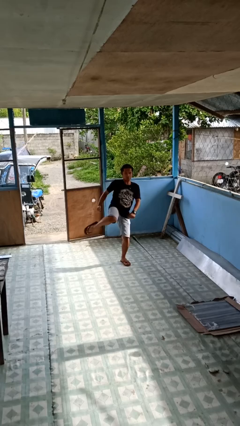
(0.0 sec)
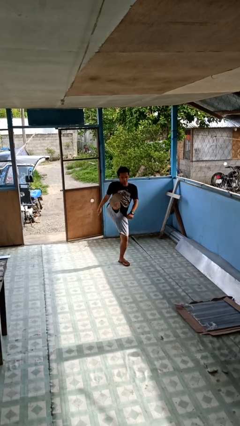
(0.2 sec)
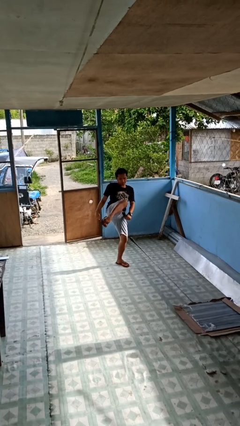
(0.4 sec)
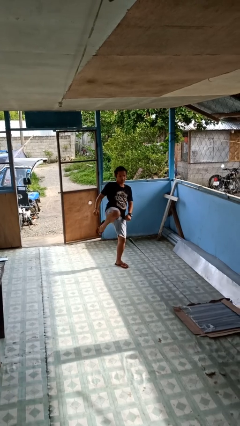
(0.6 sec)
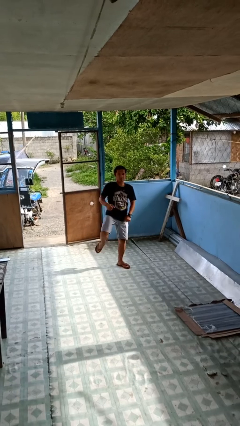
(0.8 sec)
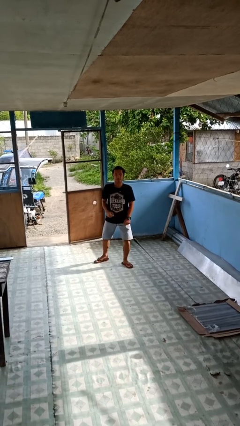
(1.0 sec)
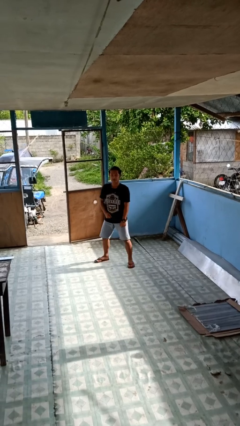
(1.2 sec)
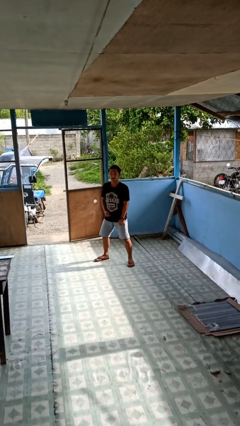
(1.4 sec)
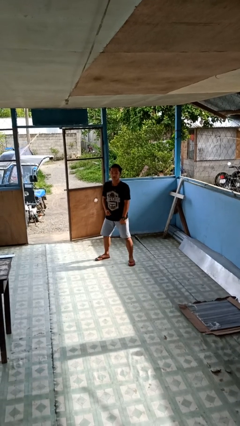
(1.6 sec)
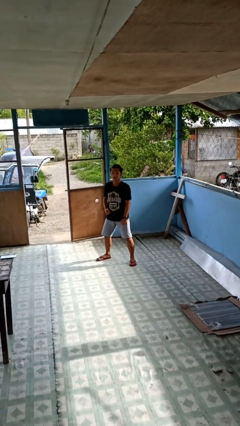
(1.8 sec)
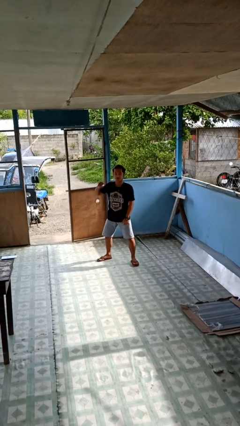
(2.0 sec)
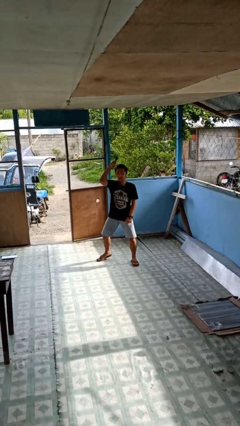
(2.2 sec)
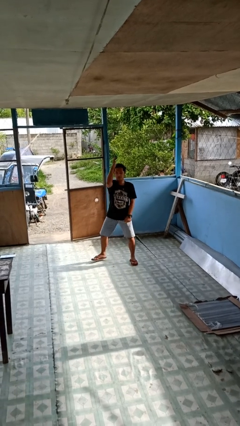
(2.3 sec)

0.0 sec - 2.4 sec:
person karate kicks

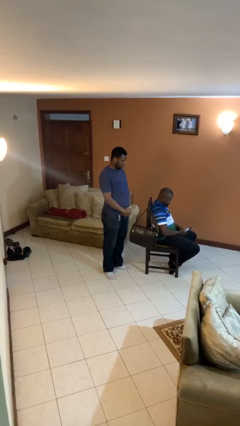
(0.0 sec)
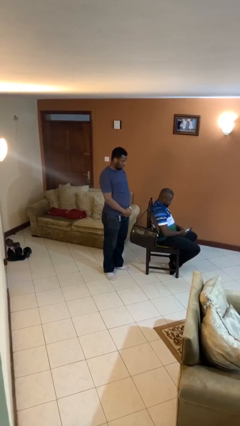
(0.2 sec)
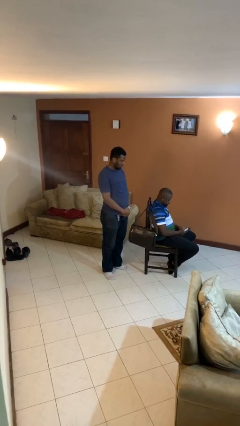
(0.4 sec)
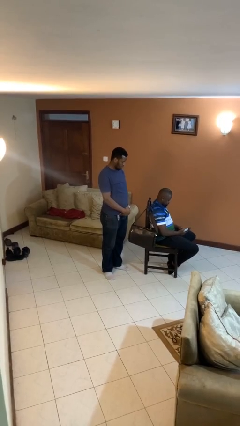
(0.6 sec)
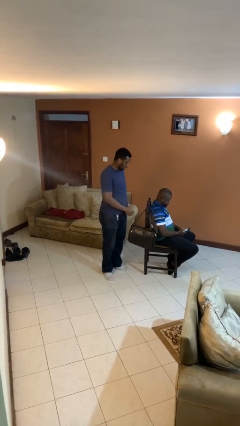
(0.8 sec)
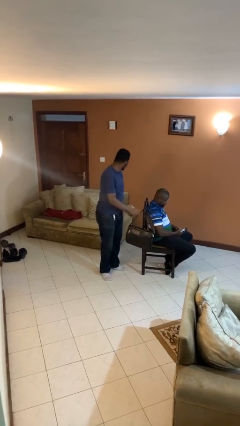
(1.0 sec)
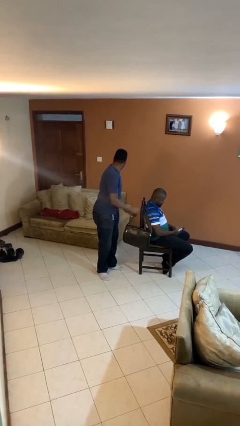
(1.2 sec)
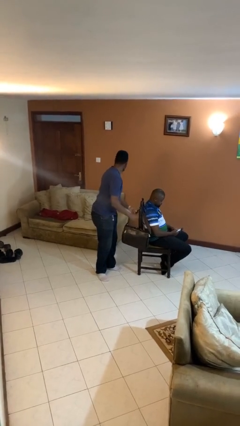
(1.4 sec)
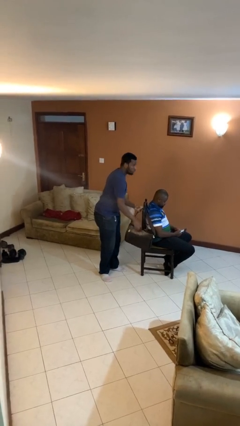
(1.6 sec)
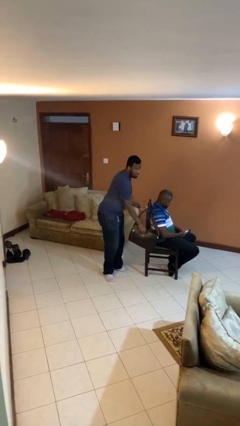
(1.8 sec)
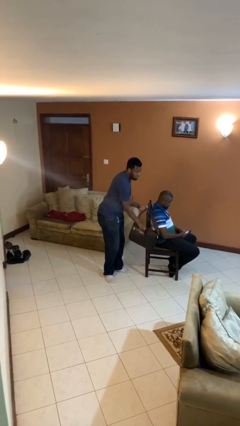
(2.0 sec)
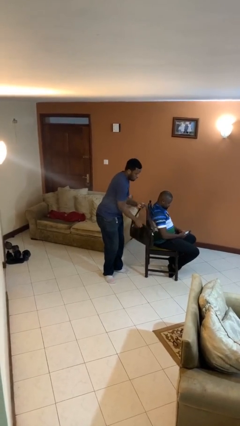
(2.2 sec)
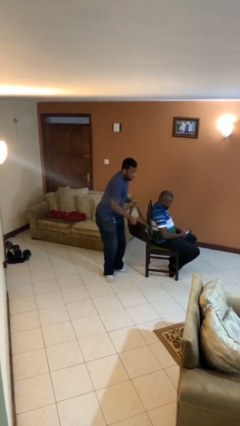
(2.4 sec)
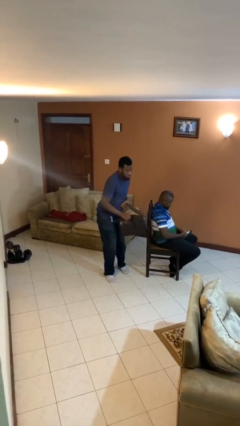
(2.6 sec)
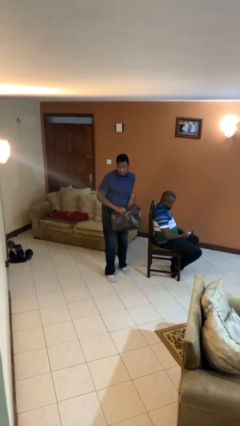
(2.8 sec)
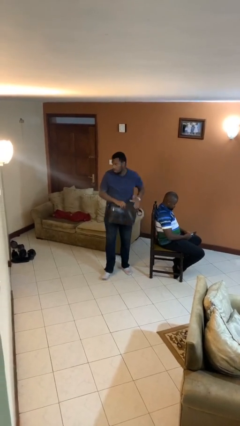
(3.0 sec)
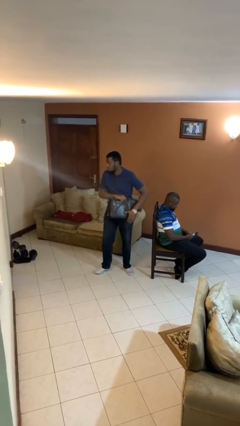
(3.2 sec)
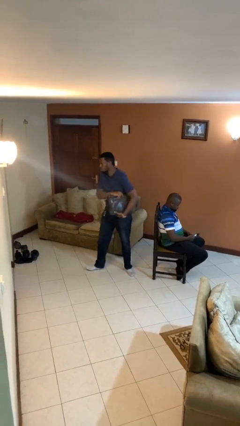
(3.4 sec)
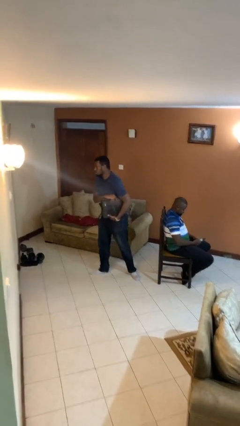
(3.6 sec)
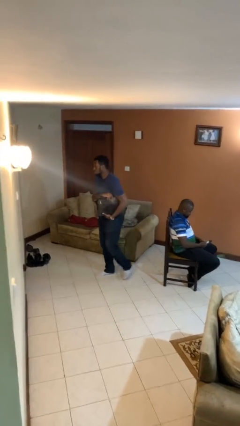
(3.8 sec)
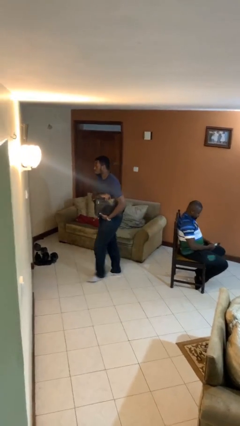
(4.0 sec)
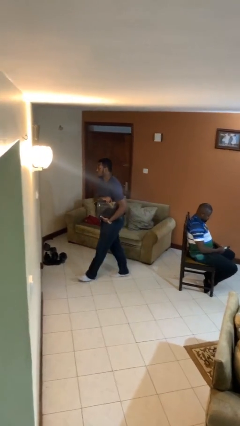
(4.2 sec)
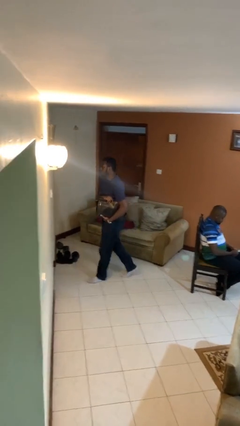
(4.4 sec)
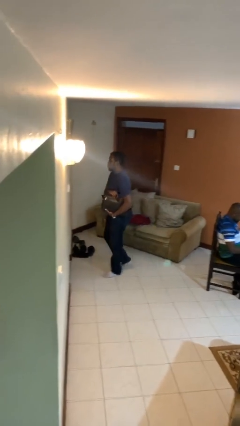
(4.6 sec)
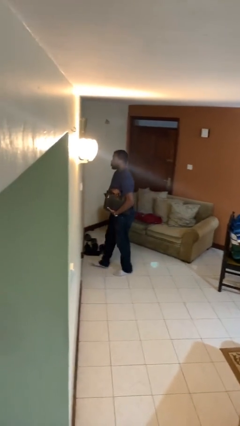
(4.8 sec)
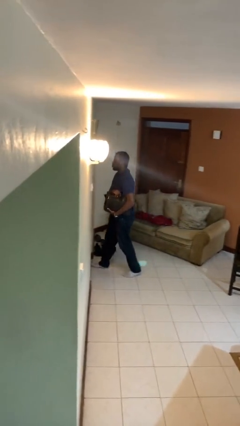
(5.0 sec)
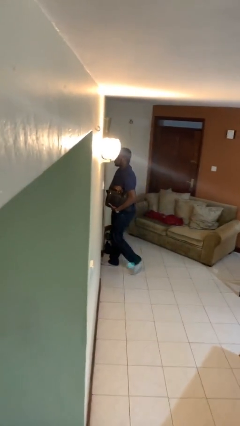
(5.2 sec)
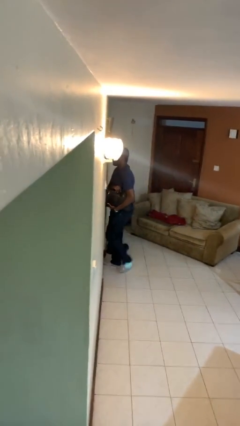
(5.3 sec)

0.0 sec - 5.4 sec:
person steals object from person

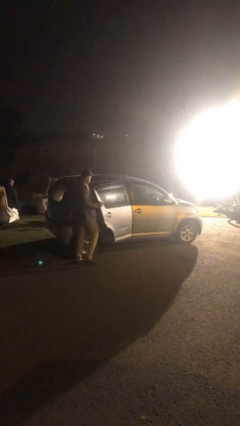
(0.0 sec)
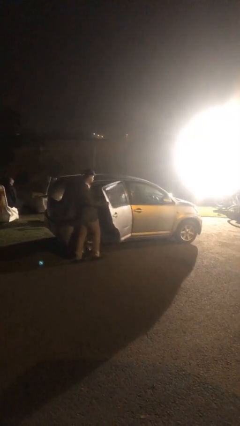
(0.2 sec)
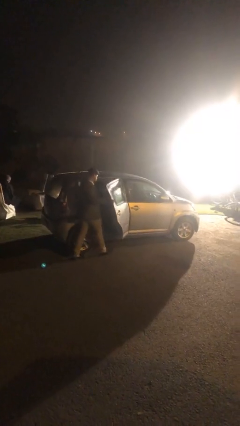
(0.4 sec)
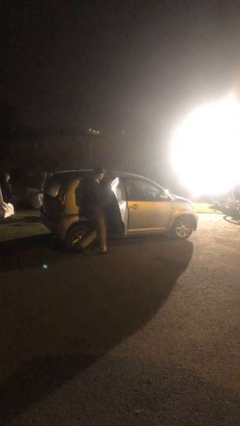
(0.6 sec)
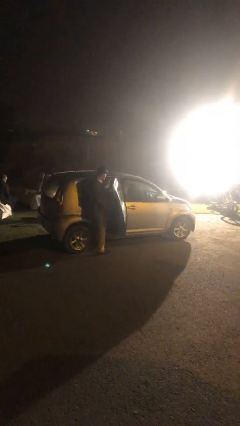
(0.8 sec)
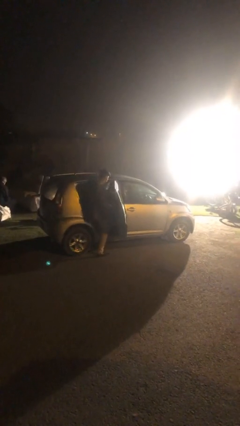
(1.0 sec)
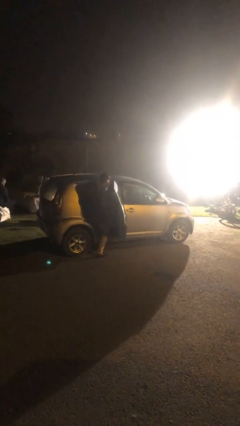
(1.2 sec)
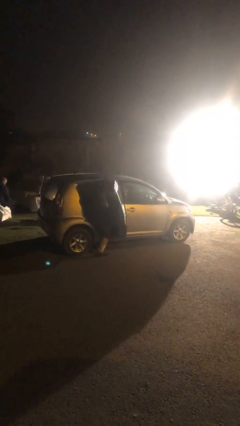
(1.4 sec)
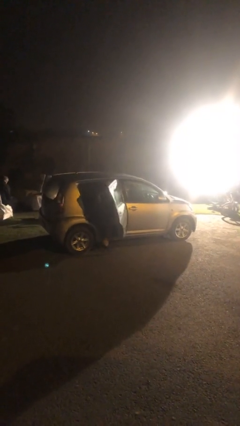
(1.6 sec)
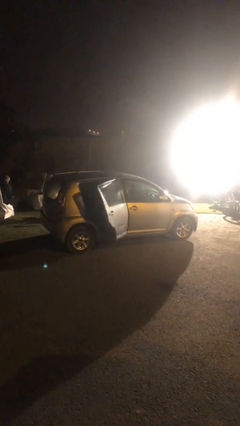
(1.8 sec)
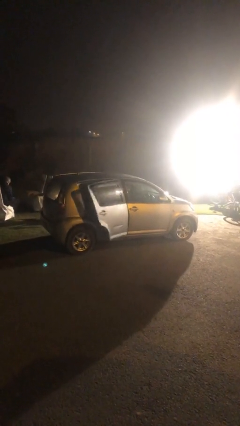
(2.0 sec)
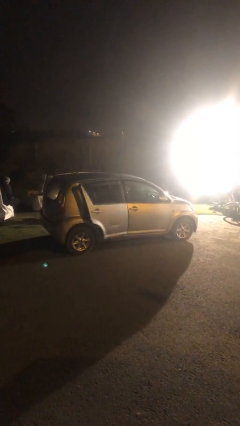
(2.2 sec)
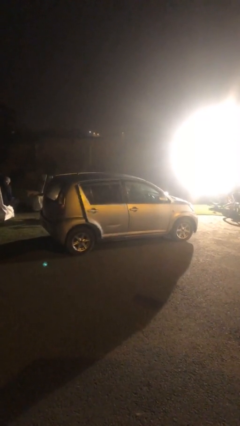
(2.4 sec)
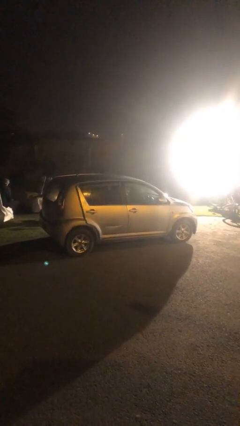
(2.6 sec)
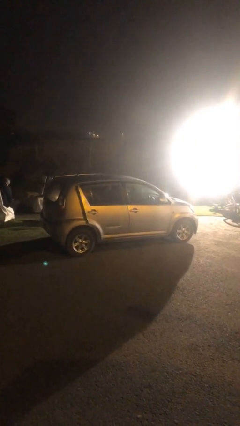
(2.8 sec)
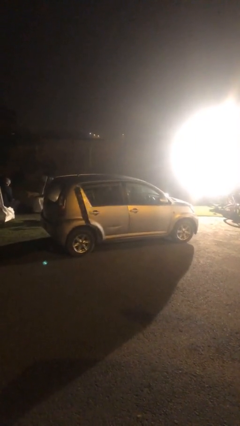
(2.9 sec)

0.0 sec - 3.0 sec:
car picks up person

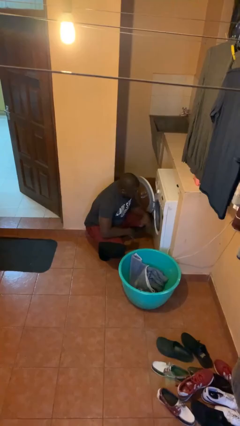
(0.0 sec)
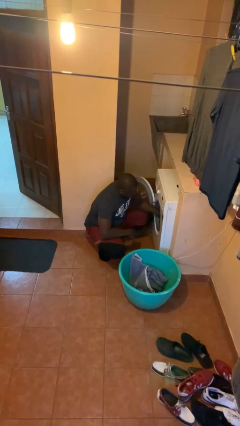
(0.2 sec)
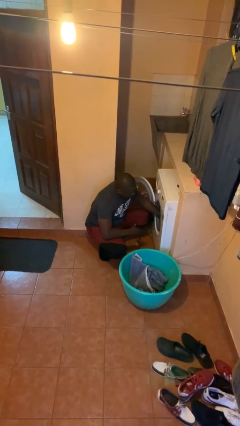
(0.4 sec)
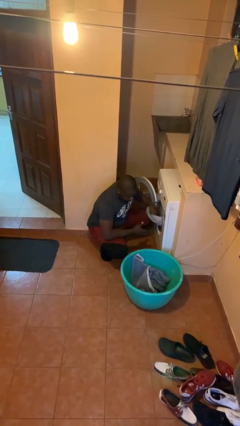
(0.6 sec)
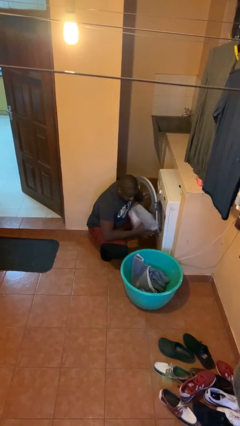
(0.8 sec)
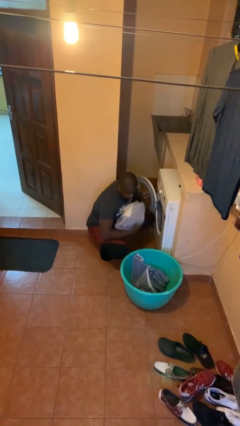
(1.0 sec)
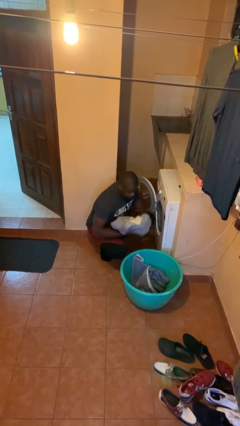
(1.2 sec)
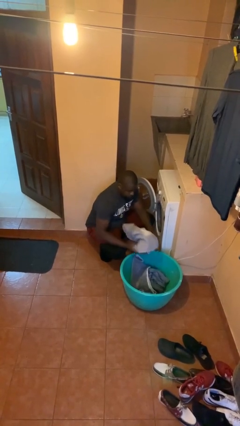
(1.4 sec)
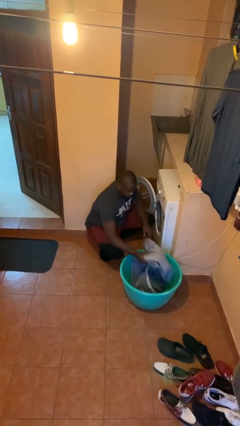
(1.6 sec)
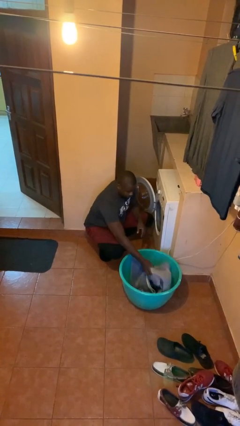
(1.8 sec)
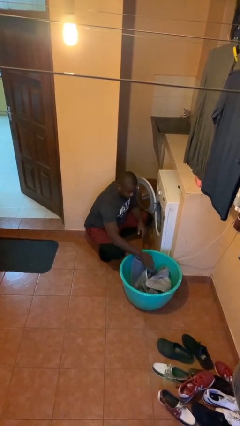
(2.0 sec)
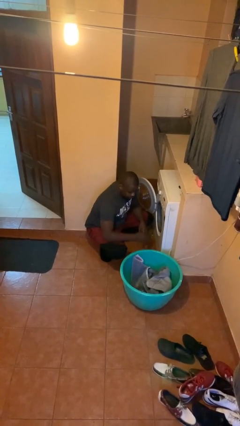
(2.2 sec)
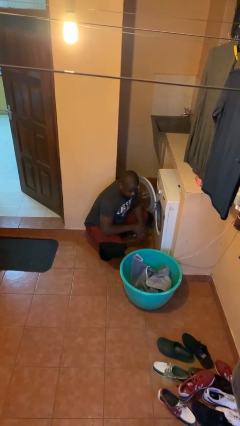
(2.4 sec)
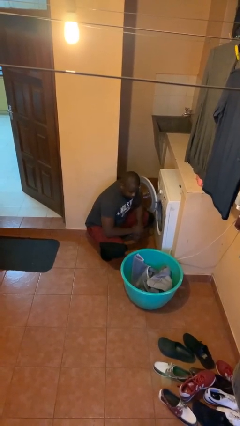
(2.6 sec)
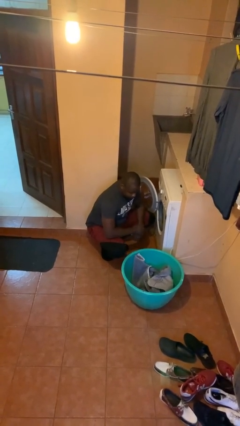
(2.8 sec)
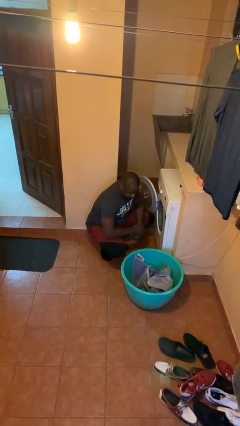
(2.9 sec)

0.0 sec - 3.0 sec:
person unloads dryer

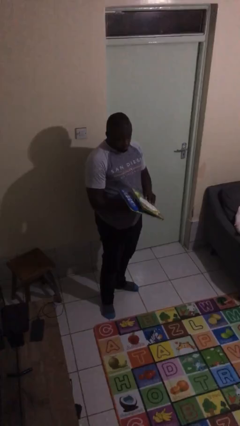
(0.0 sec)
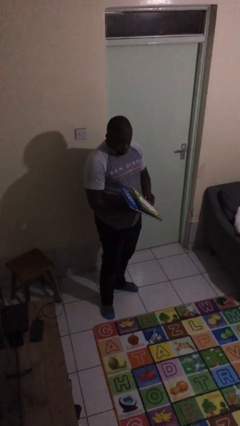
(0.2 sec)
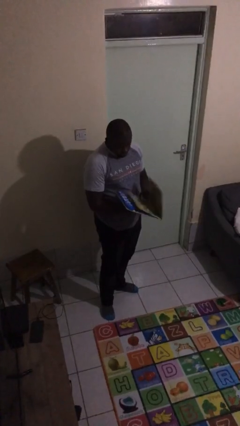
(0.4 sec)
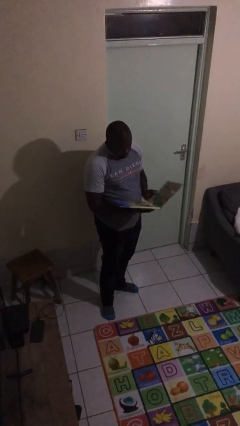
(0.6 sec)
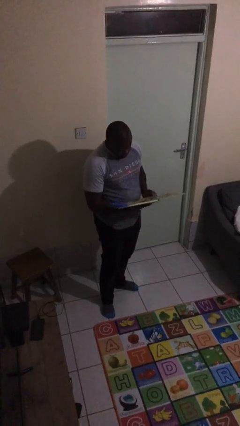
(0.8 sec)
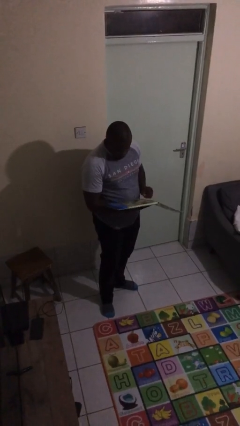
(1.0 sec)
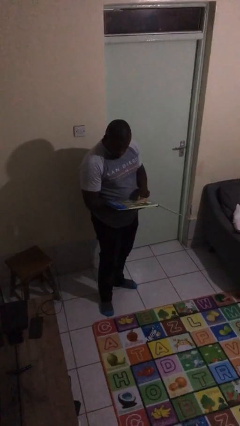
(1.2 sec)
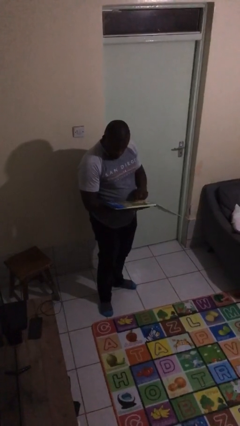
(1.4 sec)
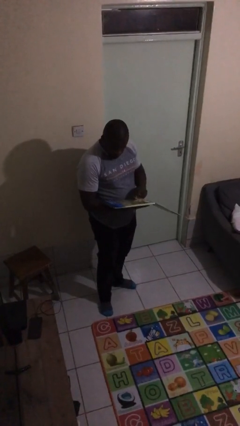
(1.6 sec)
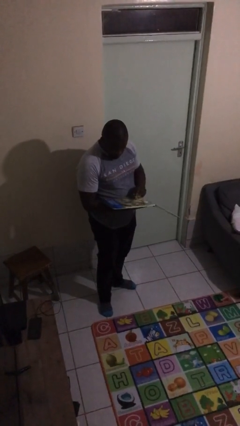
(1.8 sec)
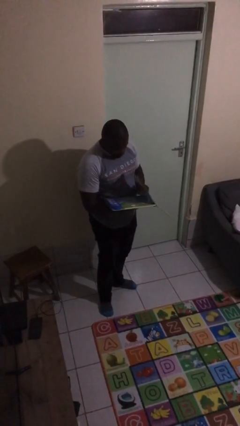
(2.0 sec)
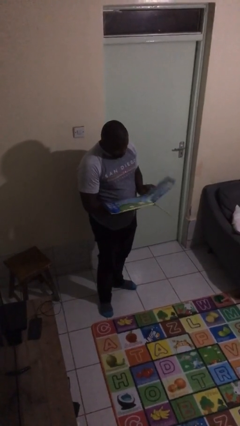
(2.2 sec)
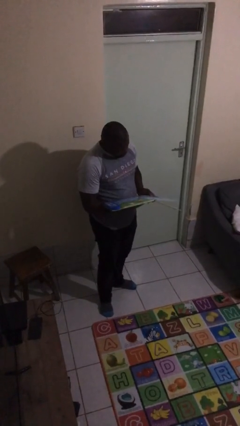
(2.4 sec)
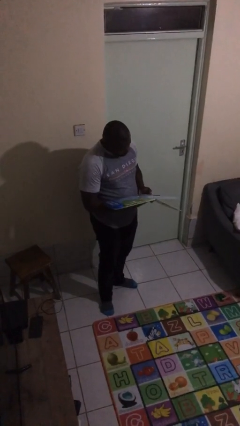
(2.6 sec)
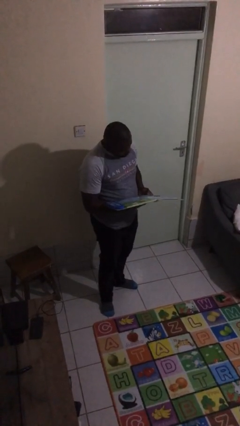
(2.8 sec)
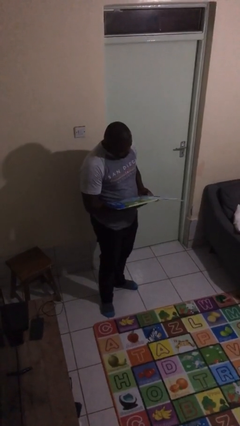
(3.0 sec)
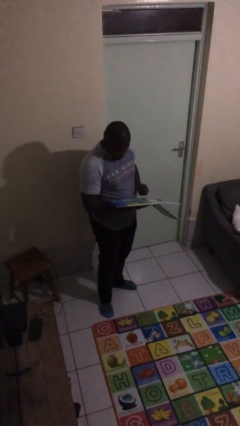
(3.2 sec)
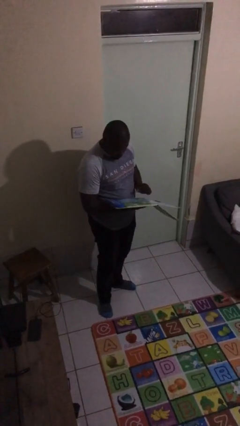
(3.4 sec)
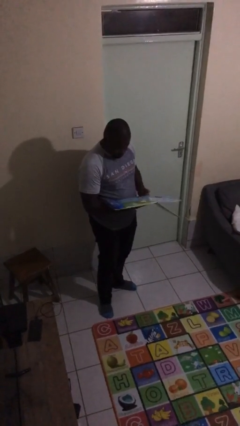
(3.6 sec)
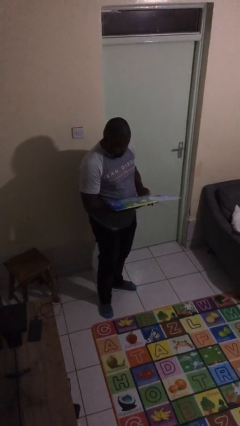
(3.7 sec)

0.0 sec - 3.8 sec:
person reads book
